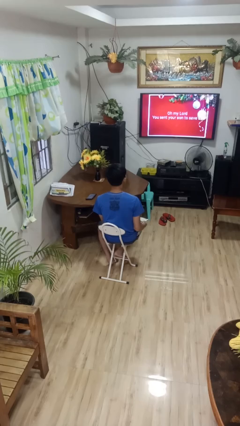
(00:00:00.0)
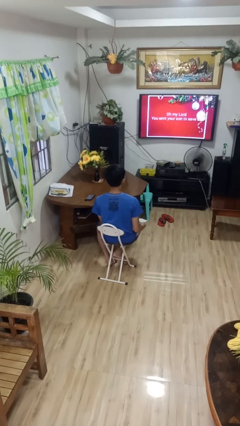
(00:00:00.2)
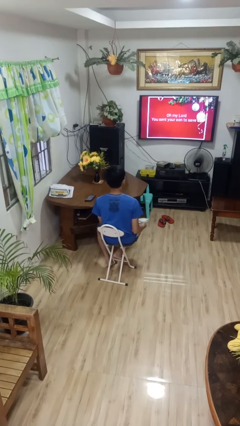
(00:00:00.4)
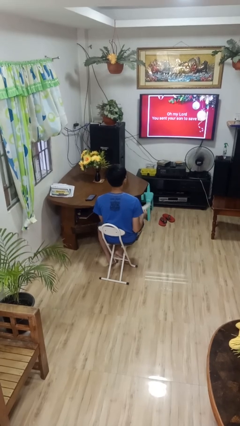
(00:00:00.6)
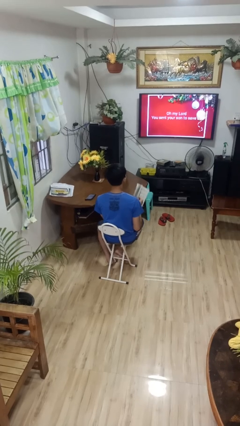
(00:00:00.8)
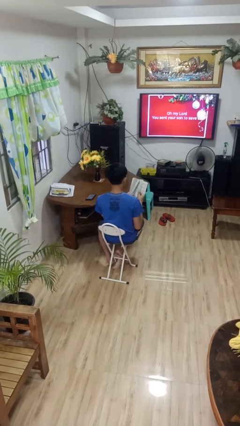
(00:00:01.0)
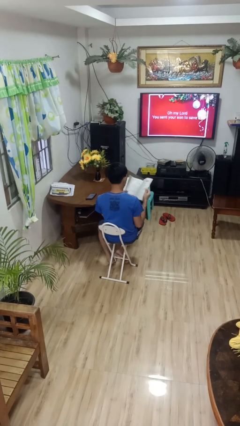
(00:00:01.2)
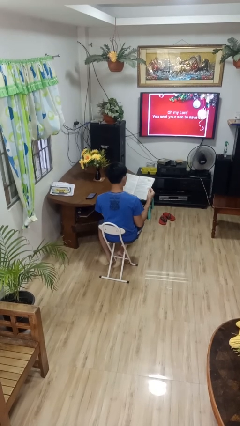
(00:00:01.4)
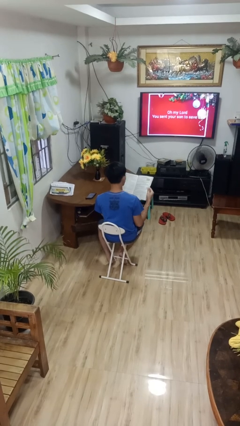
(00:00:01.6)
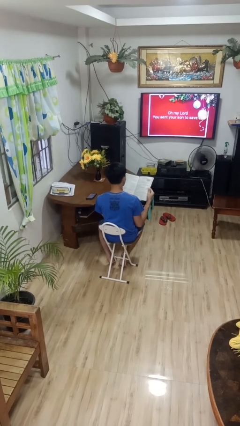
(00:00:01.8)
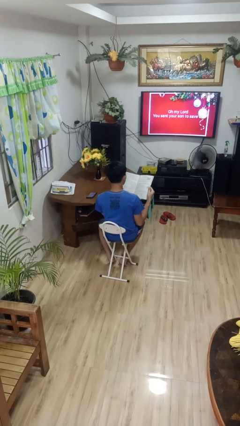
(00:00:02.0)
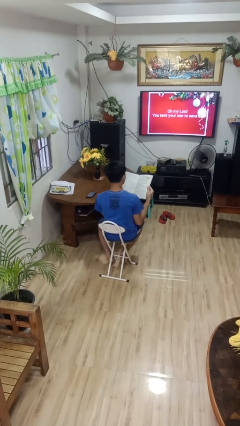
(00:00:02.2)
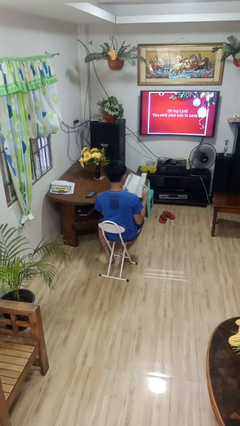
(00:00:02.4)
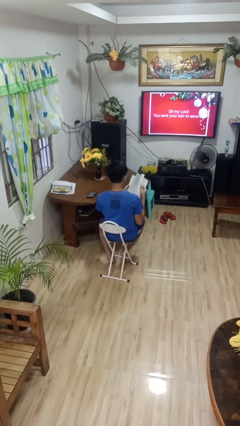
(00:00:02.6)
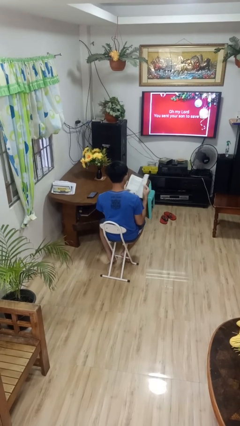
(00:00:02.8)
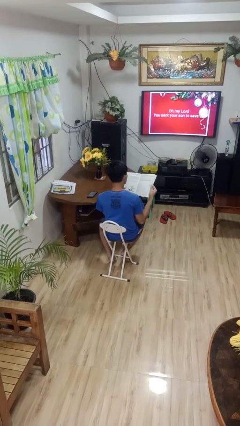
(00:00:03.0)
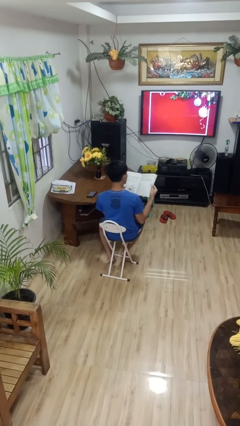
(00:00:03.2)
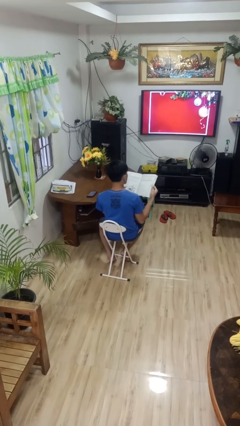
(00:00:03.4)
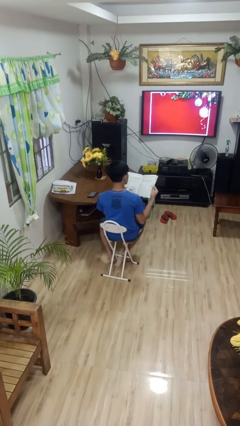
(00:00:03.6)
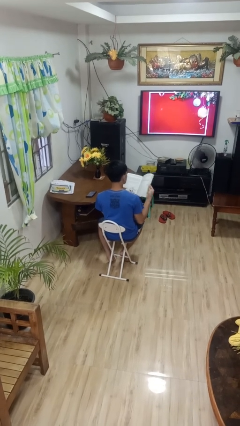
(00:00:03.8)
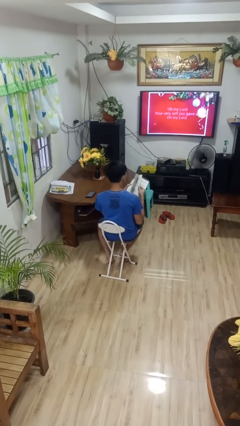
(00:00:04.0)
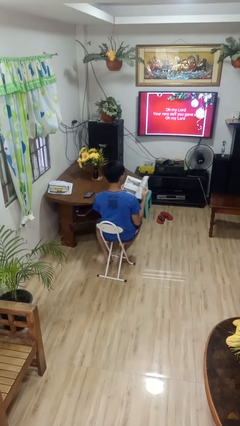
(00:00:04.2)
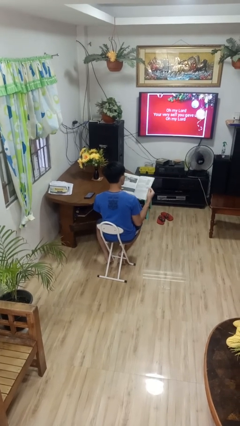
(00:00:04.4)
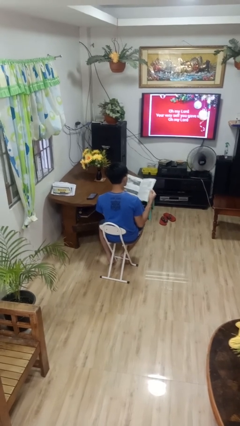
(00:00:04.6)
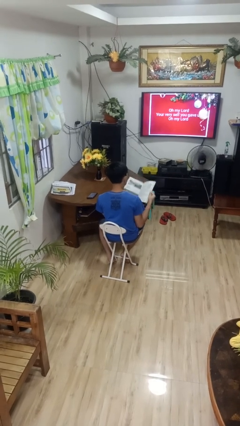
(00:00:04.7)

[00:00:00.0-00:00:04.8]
person reads book

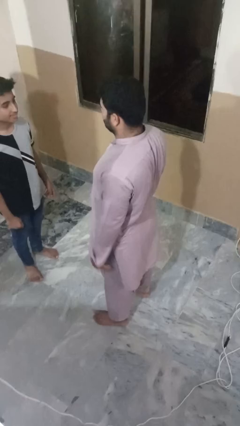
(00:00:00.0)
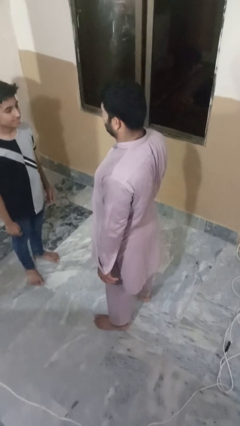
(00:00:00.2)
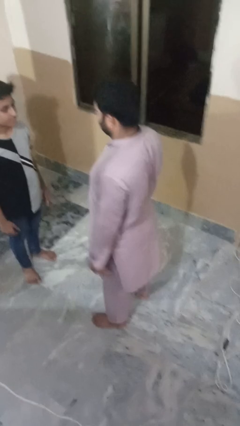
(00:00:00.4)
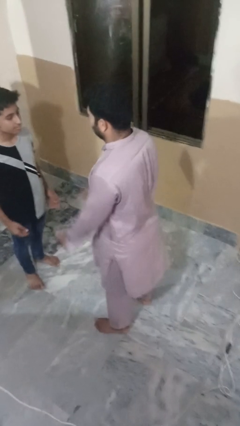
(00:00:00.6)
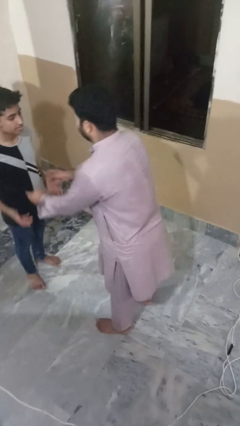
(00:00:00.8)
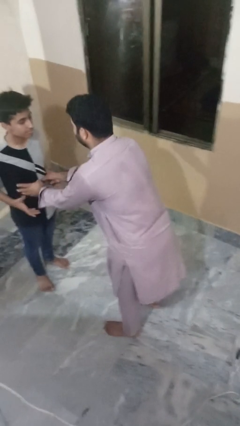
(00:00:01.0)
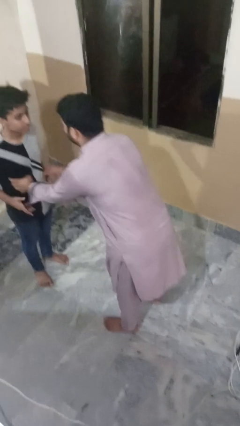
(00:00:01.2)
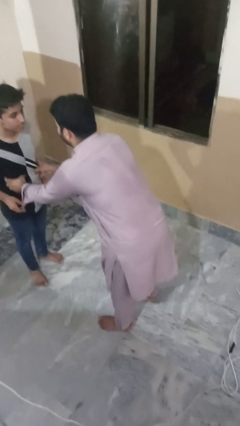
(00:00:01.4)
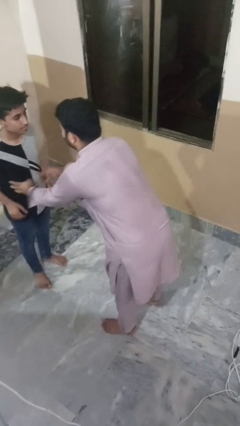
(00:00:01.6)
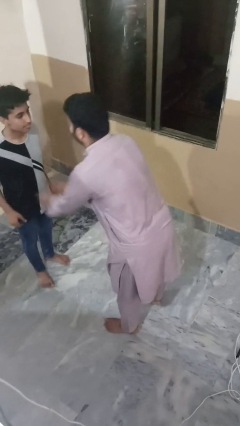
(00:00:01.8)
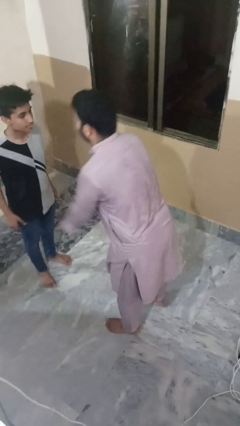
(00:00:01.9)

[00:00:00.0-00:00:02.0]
person tickles person

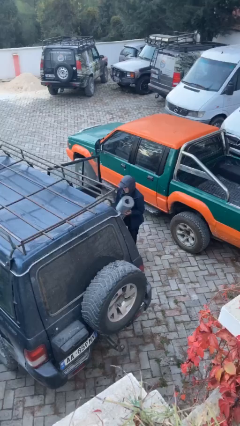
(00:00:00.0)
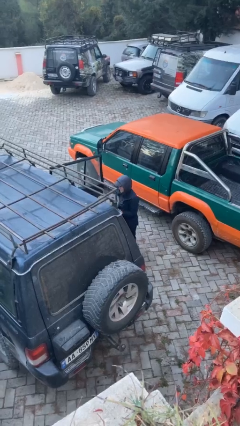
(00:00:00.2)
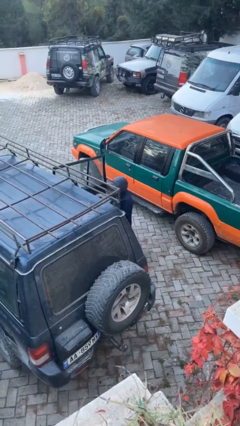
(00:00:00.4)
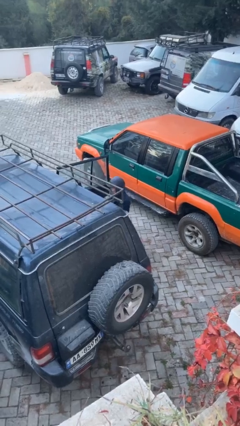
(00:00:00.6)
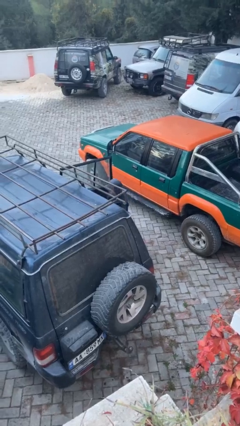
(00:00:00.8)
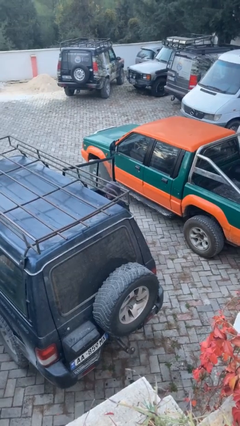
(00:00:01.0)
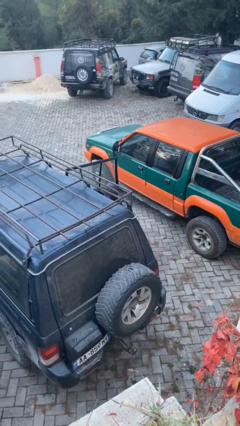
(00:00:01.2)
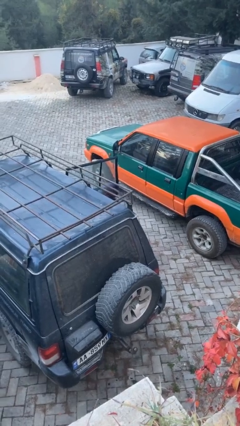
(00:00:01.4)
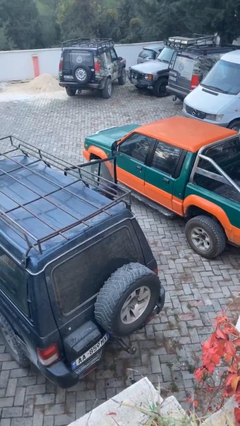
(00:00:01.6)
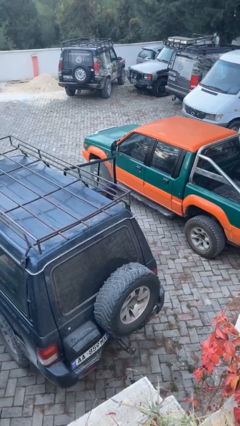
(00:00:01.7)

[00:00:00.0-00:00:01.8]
person loads car

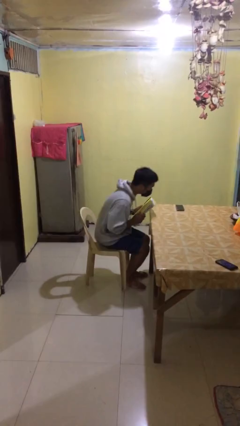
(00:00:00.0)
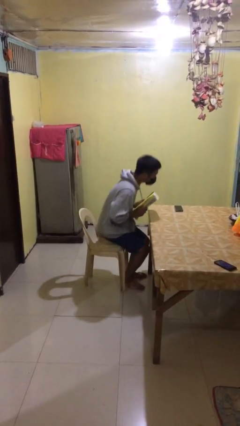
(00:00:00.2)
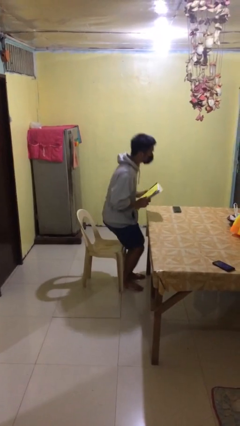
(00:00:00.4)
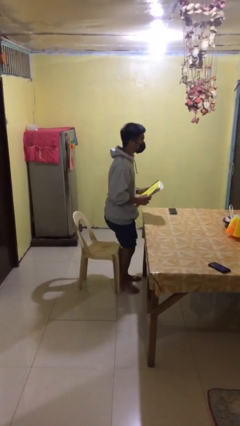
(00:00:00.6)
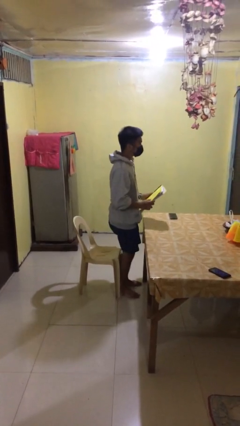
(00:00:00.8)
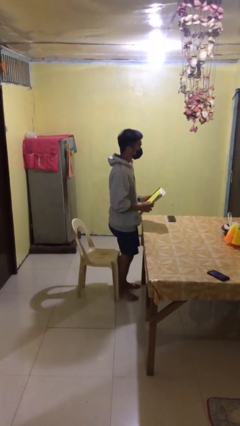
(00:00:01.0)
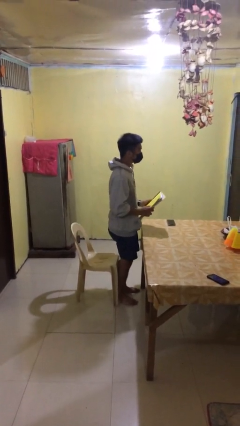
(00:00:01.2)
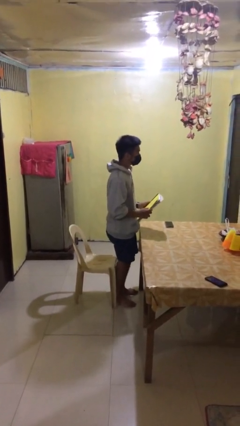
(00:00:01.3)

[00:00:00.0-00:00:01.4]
person stands up

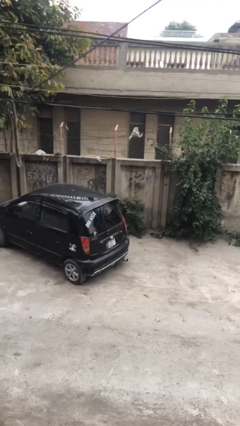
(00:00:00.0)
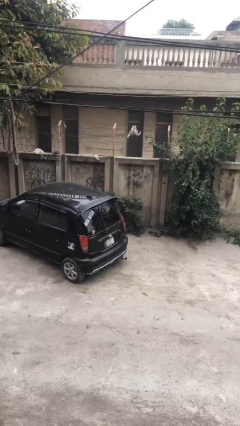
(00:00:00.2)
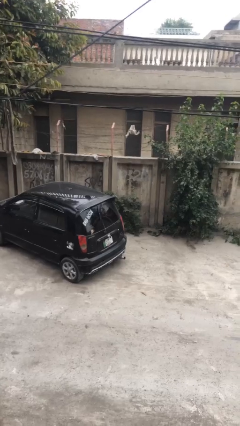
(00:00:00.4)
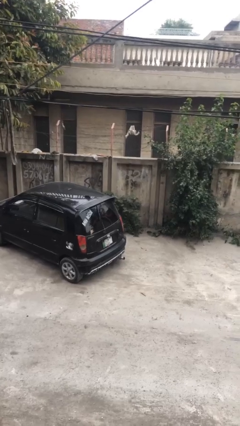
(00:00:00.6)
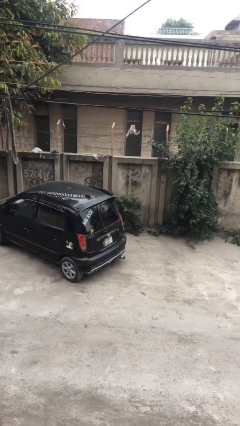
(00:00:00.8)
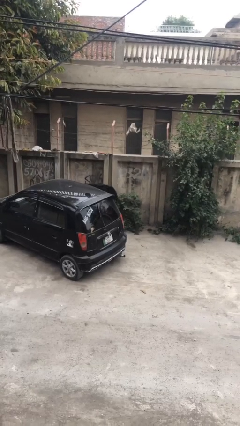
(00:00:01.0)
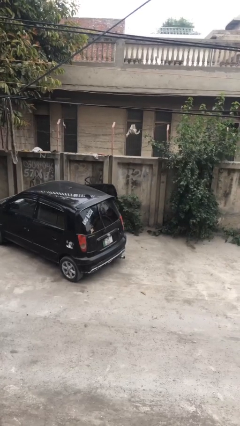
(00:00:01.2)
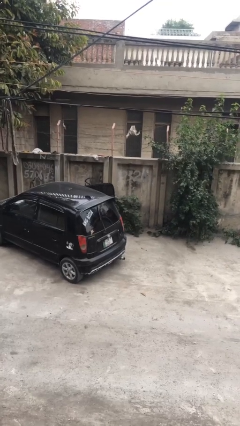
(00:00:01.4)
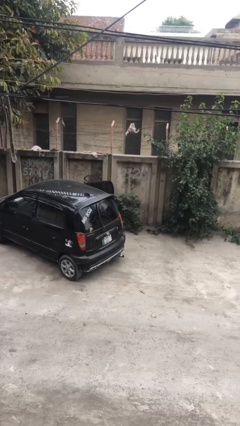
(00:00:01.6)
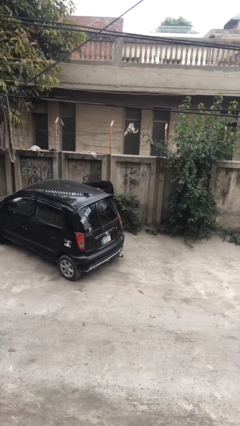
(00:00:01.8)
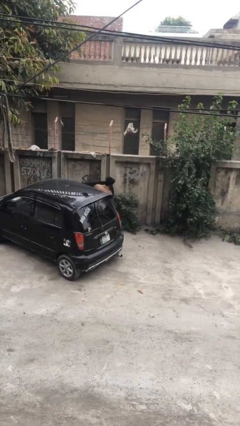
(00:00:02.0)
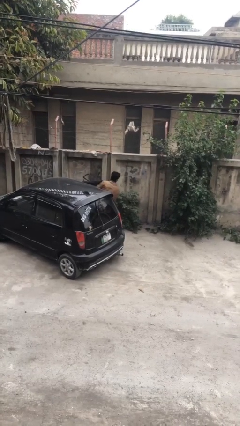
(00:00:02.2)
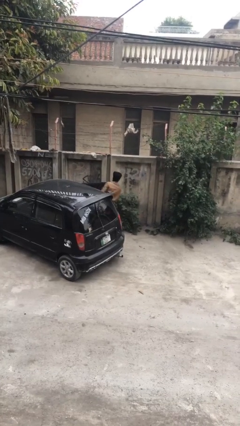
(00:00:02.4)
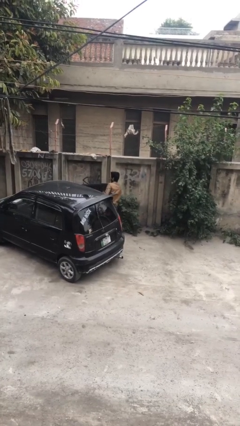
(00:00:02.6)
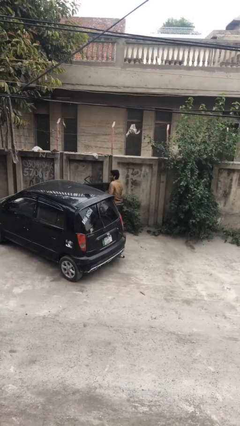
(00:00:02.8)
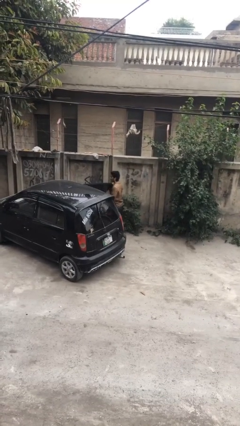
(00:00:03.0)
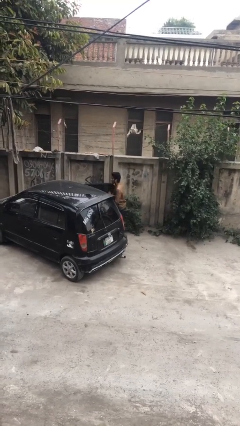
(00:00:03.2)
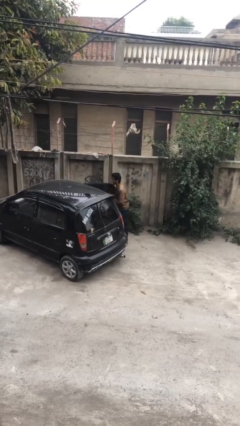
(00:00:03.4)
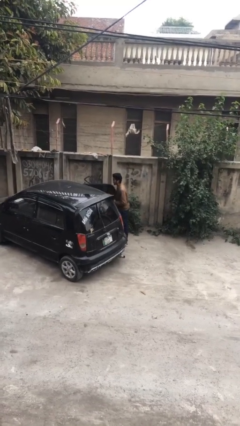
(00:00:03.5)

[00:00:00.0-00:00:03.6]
person exits car

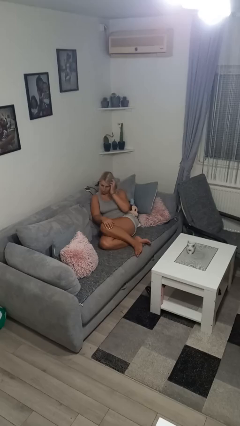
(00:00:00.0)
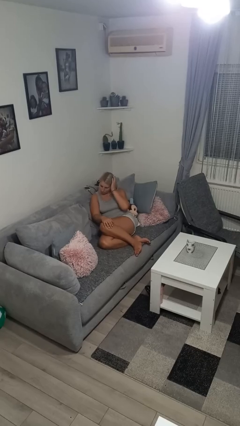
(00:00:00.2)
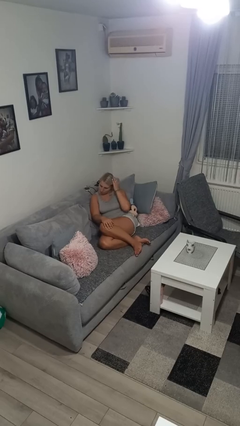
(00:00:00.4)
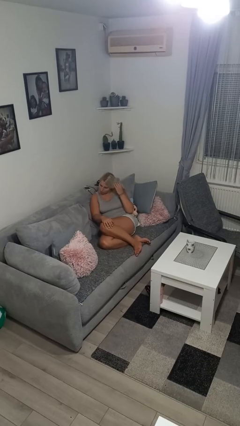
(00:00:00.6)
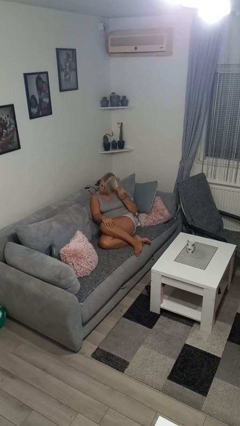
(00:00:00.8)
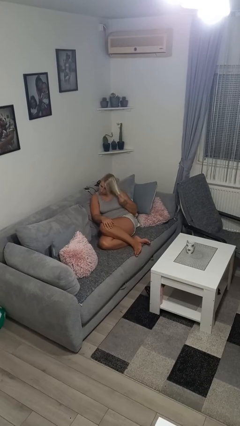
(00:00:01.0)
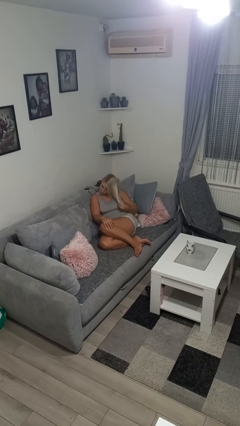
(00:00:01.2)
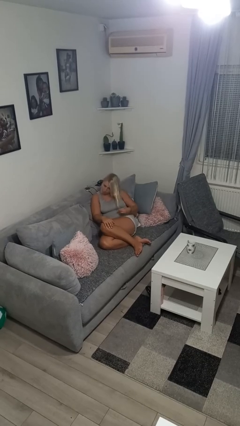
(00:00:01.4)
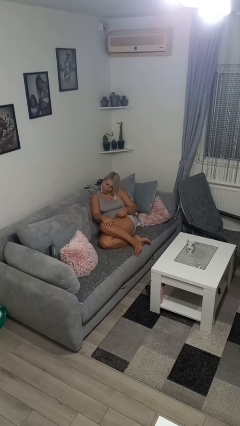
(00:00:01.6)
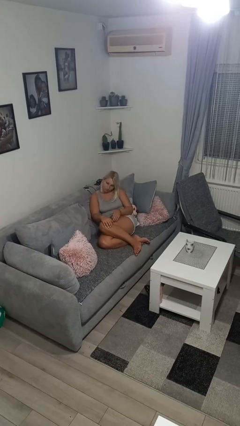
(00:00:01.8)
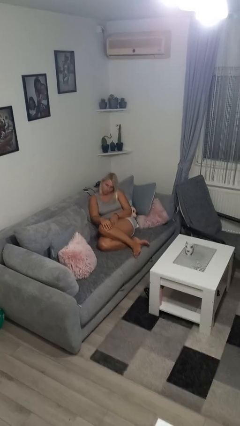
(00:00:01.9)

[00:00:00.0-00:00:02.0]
person strokes hair

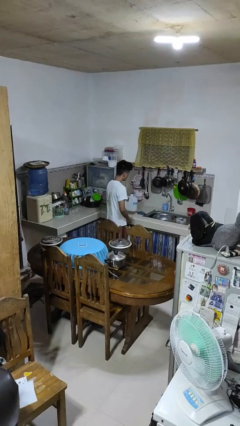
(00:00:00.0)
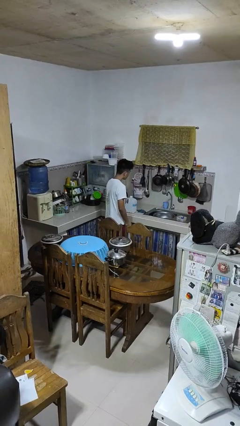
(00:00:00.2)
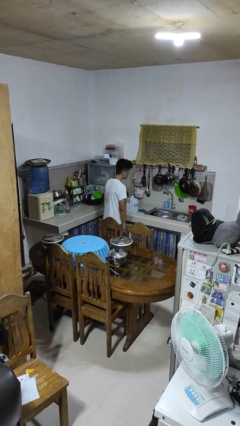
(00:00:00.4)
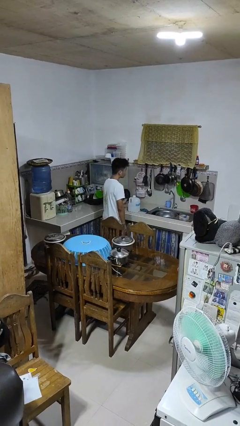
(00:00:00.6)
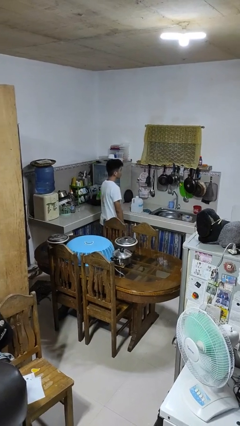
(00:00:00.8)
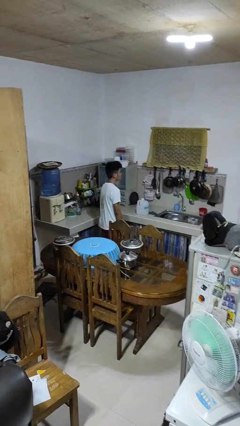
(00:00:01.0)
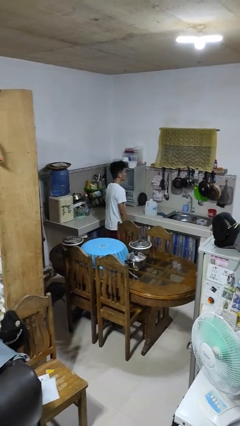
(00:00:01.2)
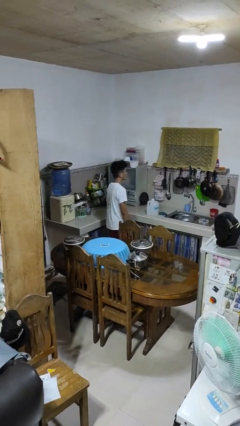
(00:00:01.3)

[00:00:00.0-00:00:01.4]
person puts down object on countertop
